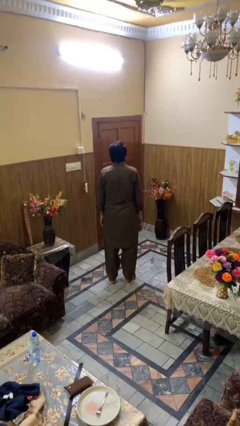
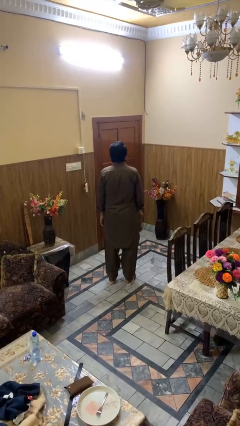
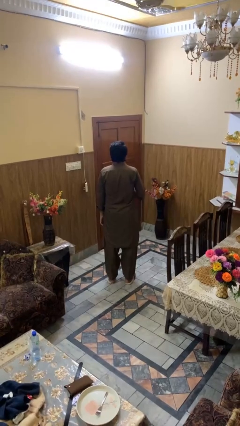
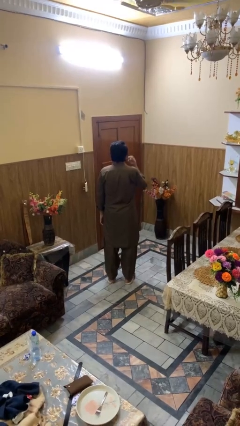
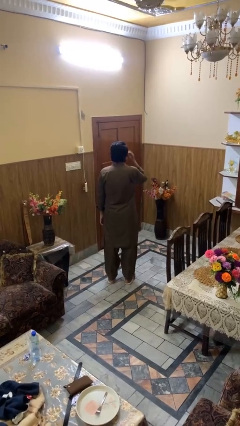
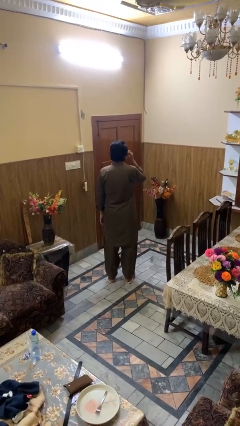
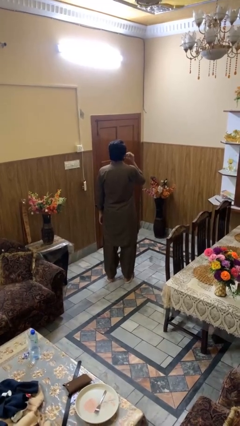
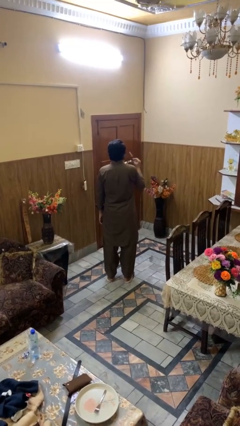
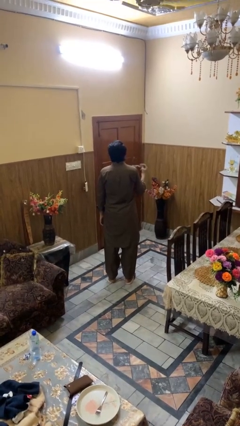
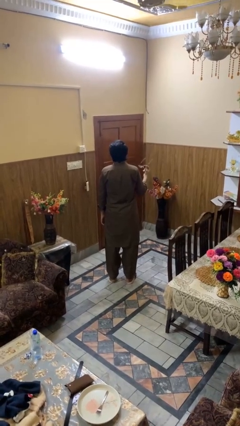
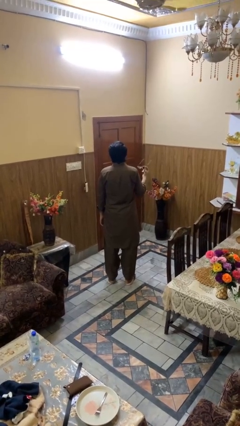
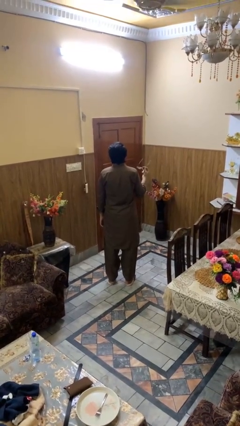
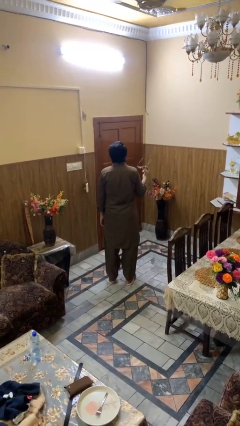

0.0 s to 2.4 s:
person takes off sunglasses

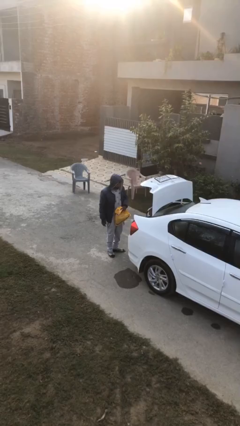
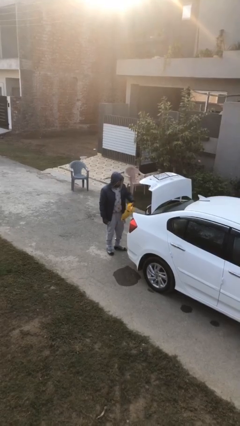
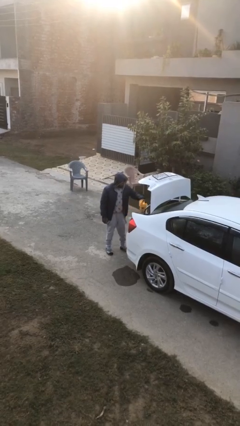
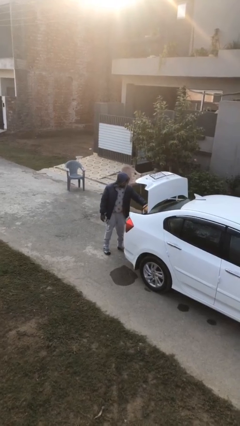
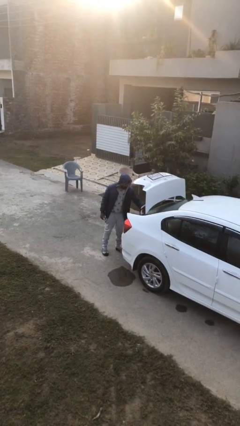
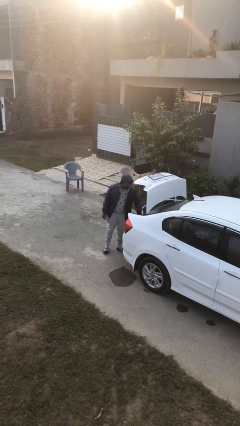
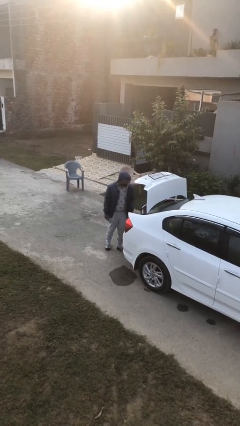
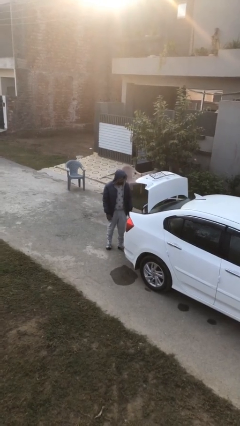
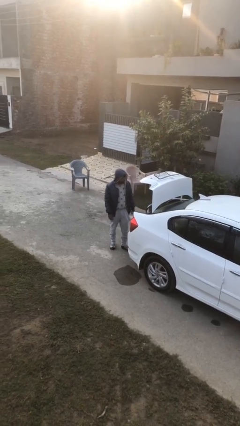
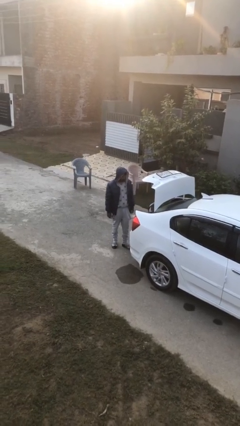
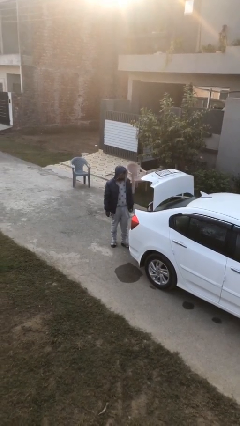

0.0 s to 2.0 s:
person loads car

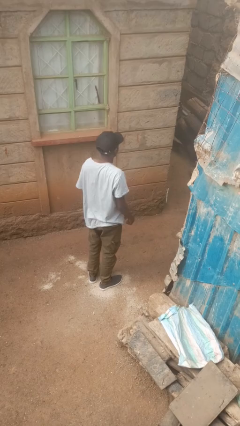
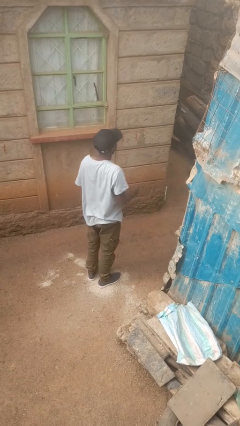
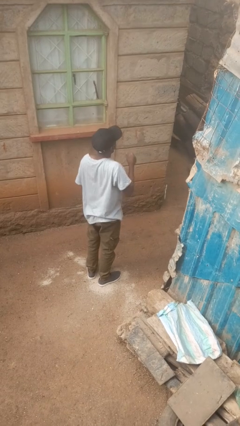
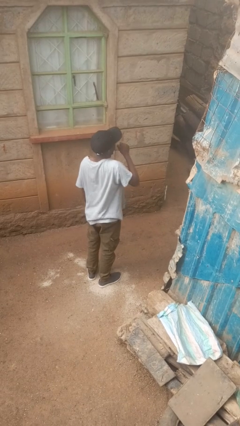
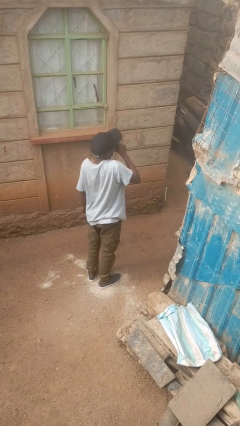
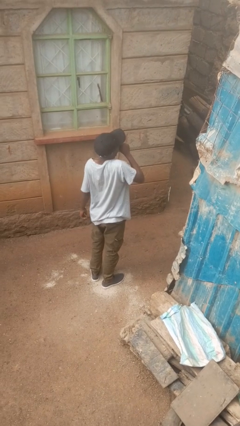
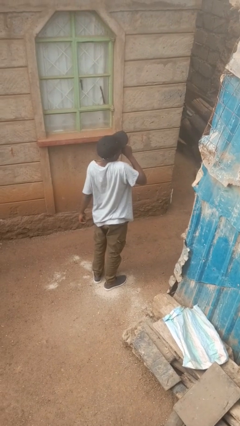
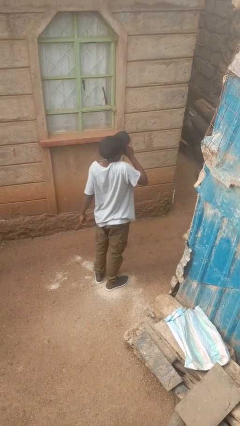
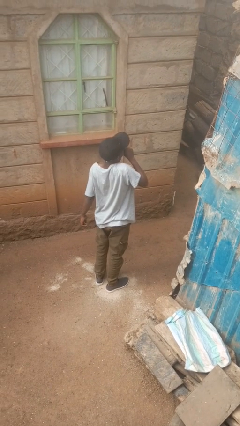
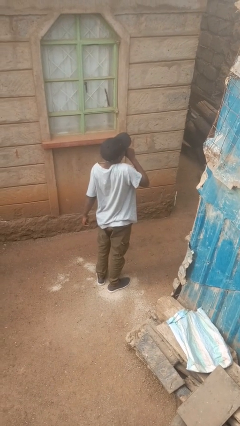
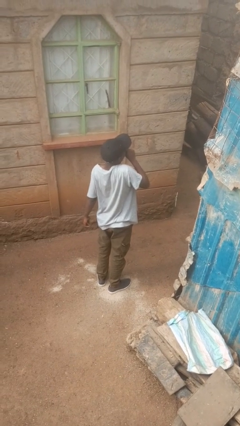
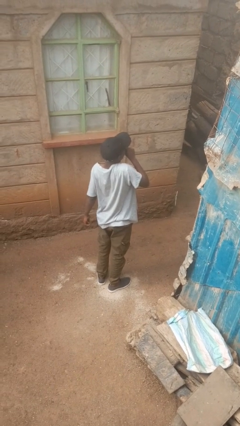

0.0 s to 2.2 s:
person yawns

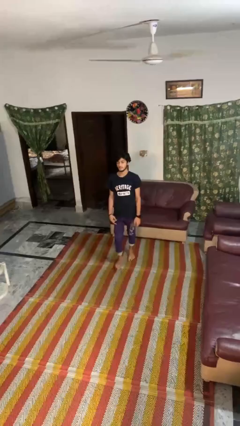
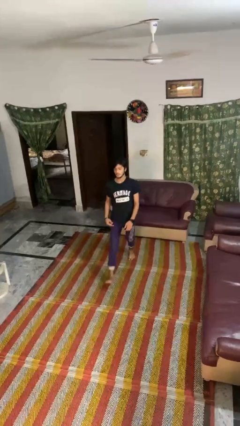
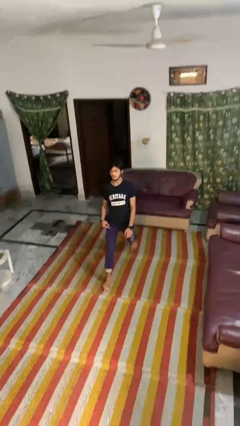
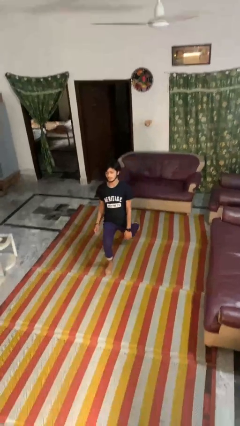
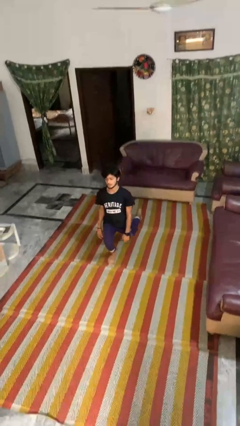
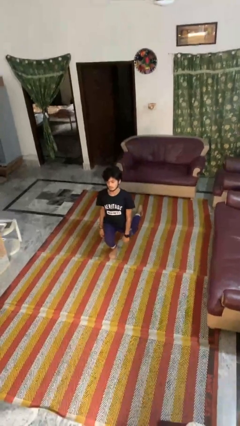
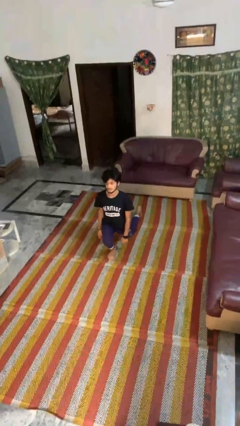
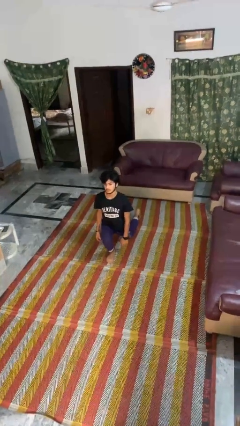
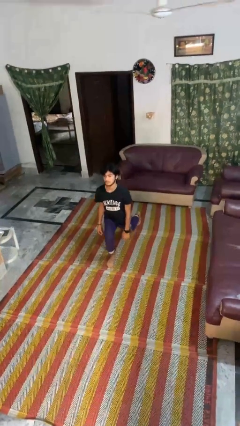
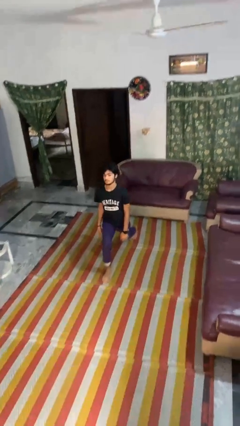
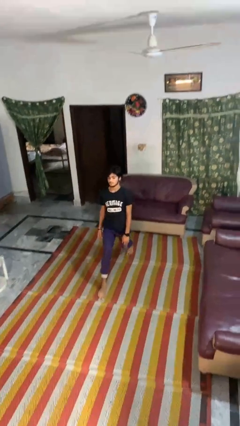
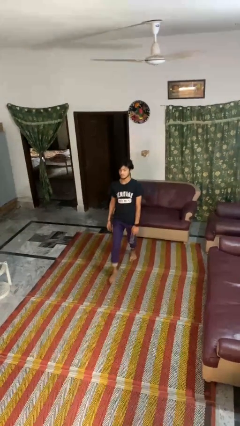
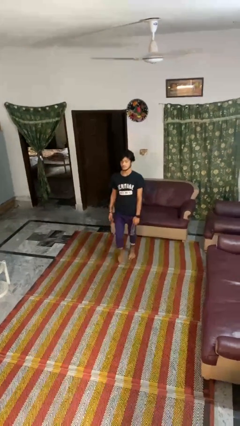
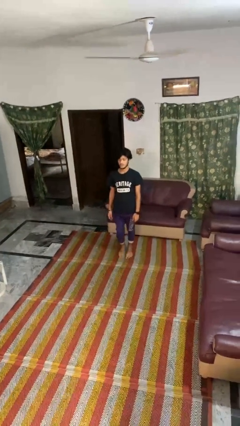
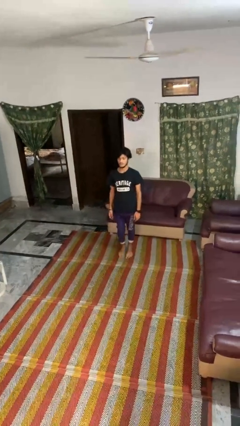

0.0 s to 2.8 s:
person exercises with lunges

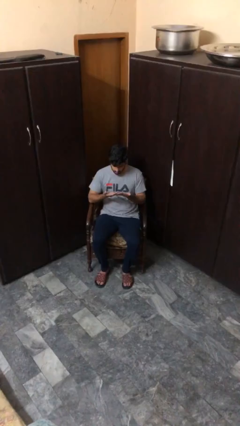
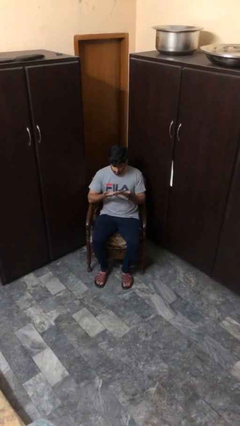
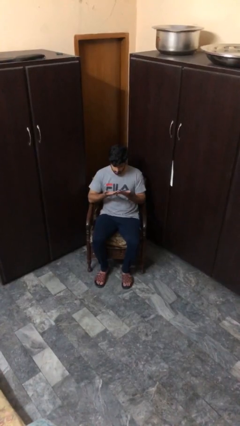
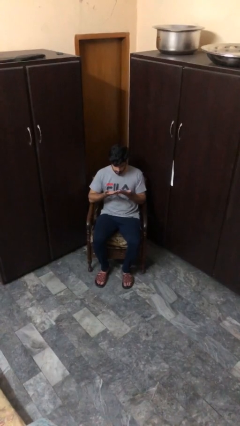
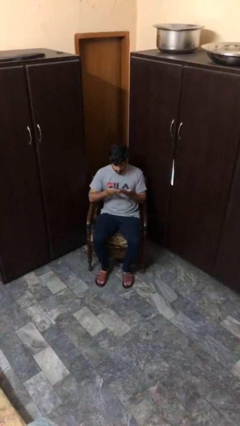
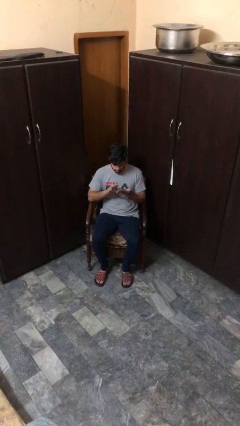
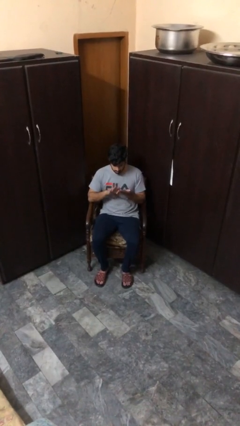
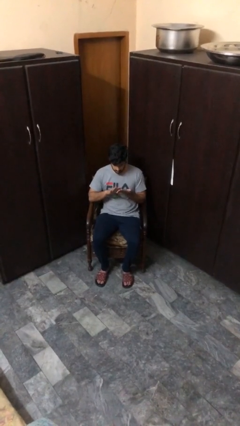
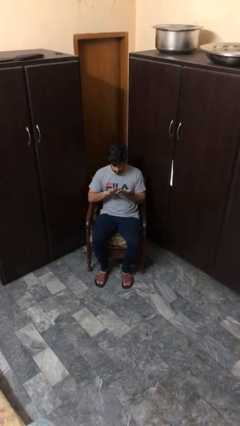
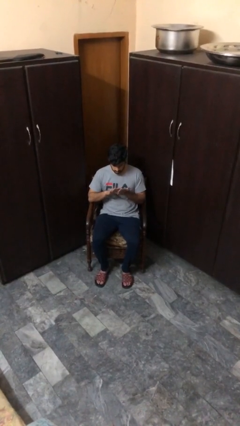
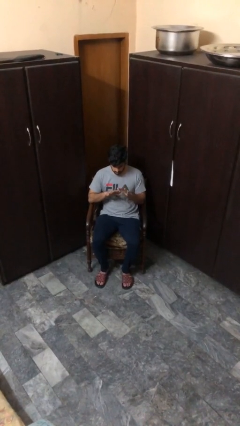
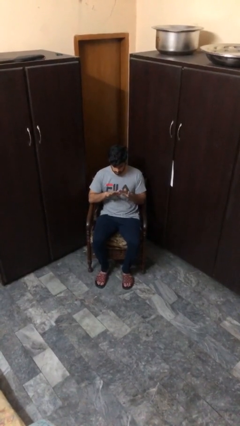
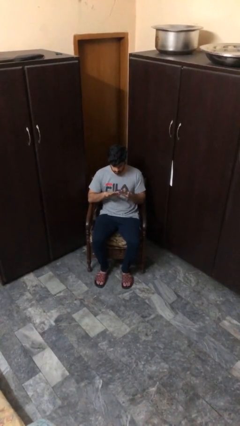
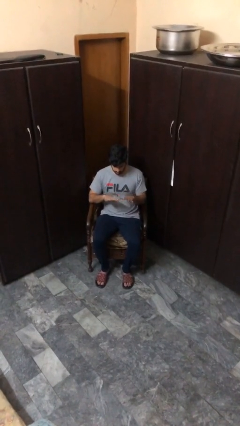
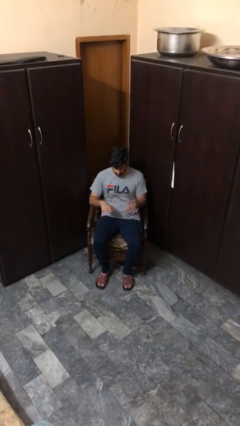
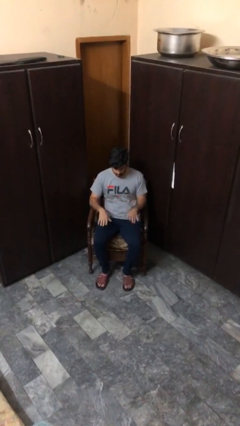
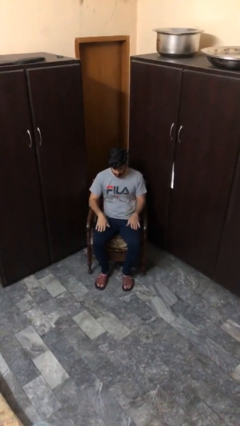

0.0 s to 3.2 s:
person looks at hands in lap

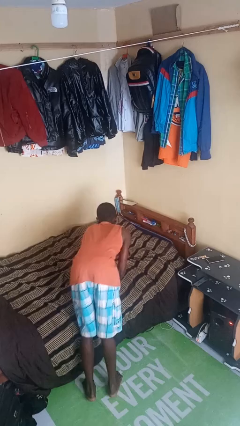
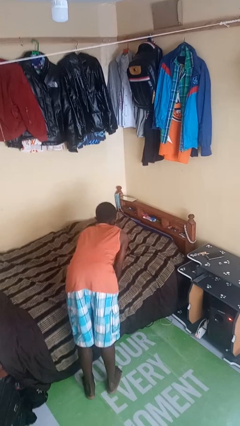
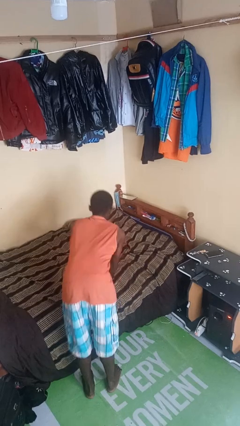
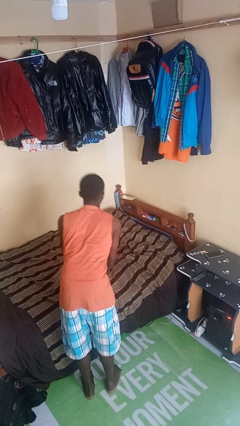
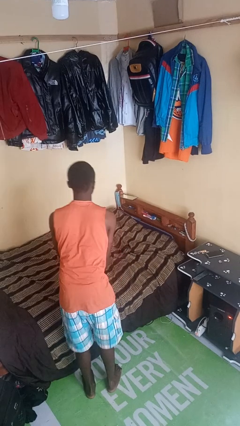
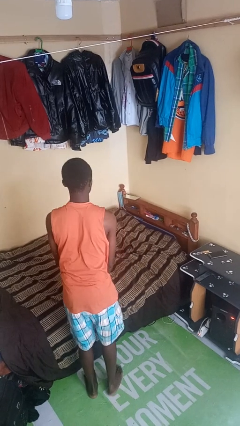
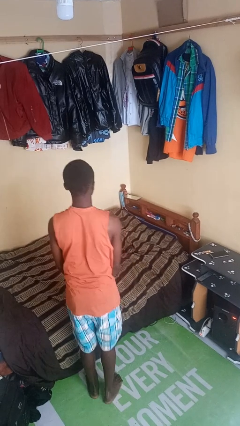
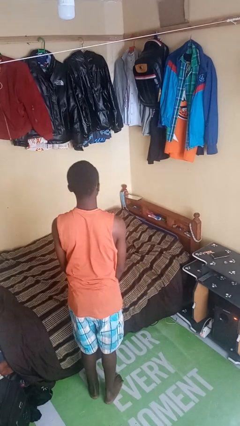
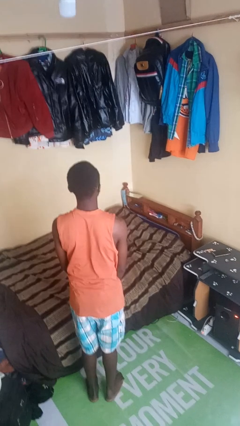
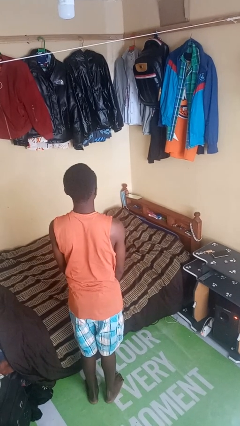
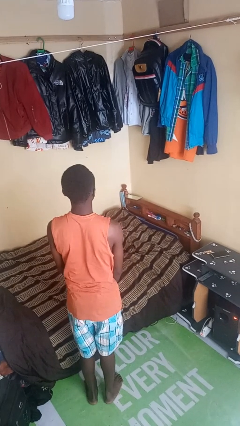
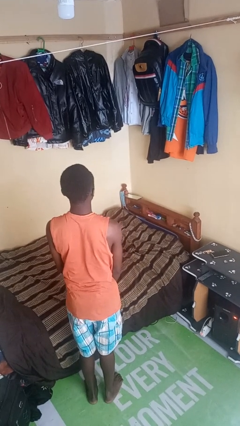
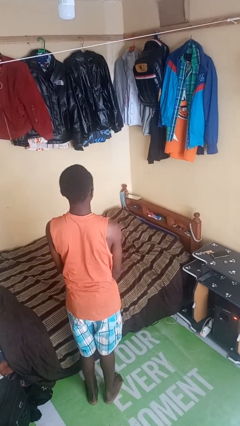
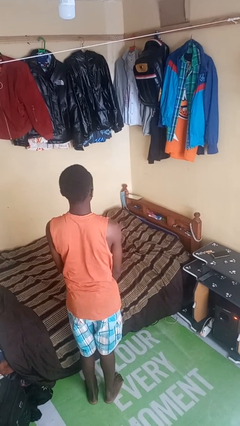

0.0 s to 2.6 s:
person stands up

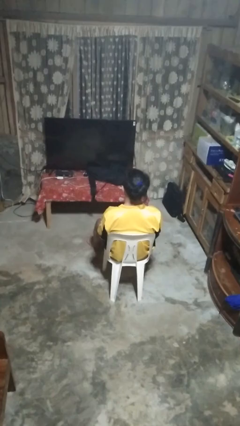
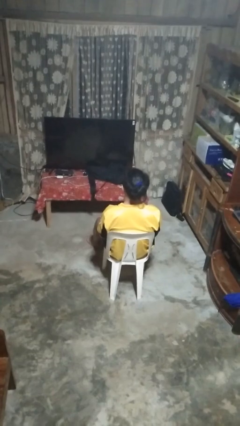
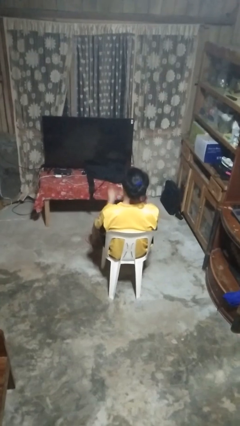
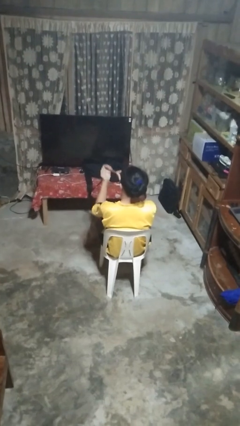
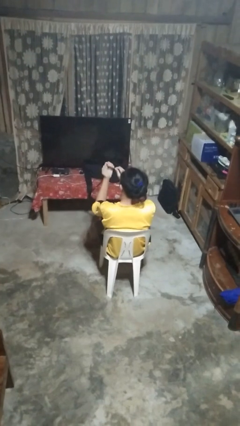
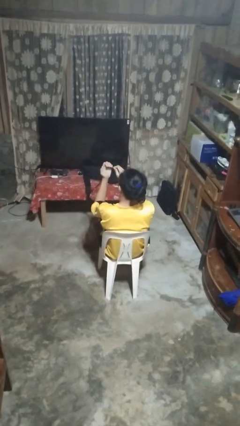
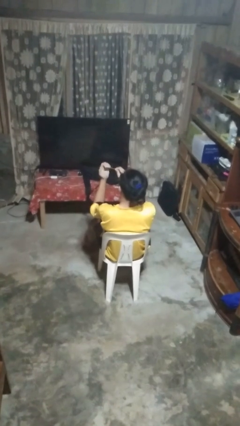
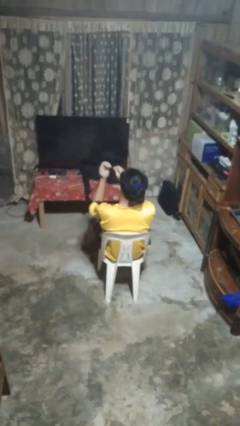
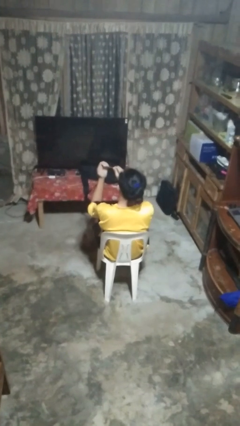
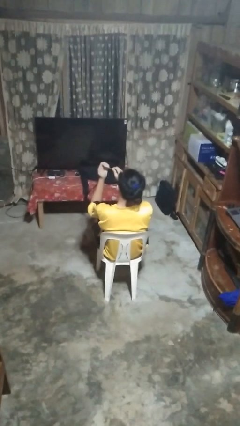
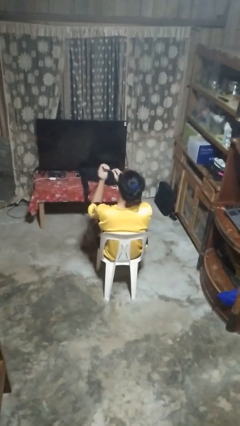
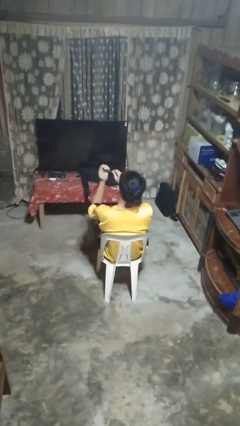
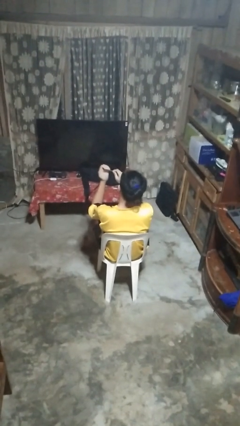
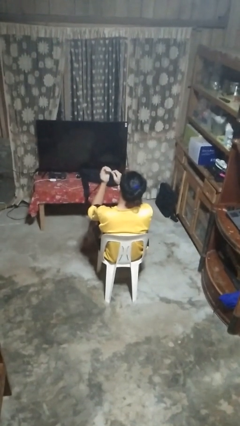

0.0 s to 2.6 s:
person files fingernails
